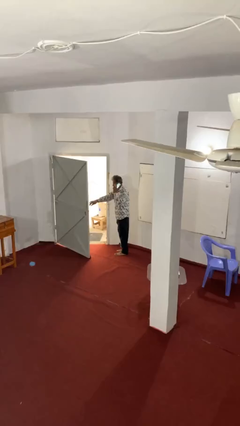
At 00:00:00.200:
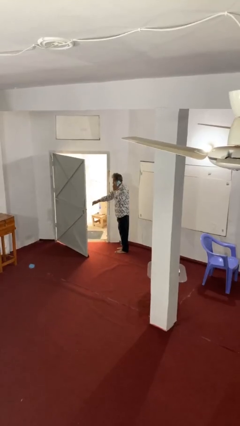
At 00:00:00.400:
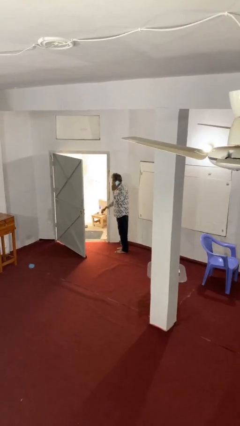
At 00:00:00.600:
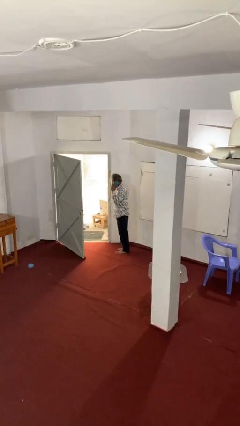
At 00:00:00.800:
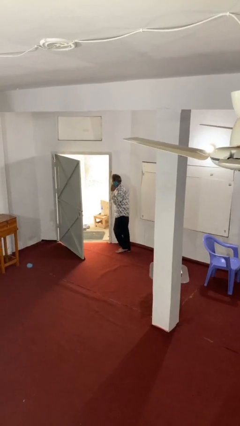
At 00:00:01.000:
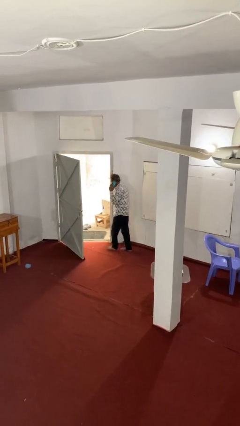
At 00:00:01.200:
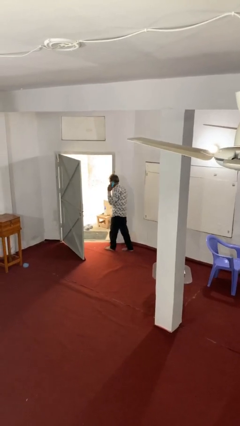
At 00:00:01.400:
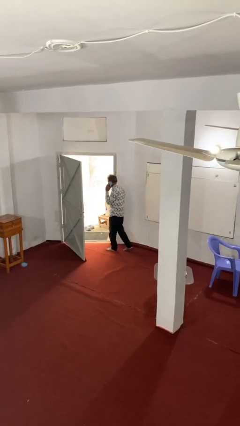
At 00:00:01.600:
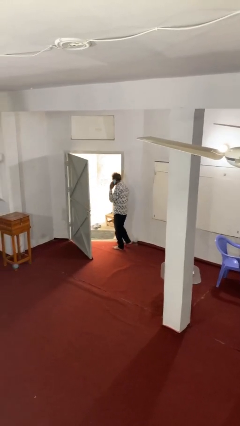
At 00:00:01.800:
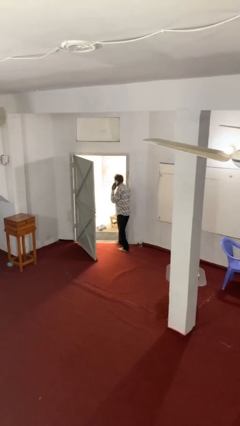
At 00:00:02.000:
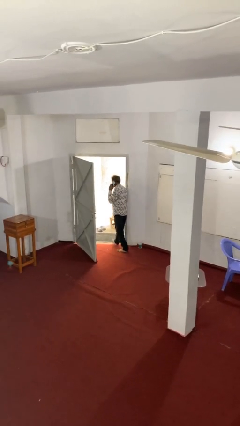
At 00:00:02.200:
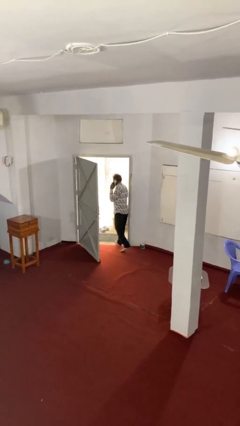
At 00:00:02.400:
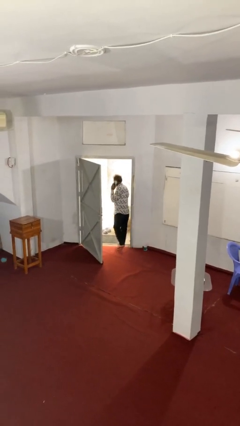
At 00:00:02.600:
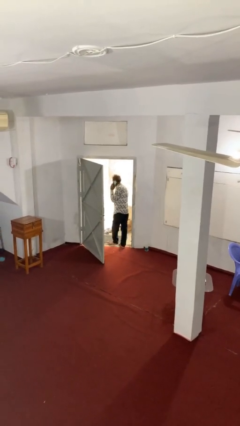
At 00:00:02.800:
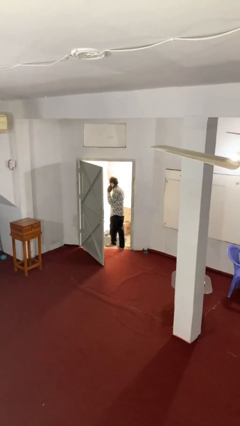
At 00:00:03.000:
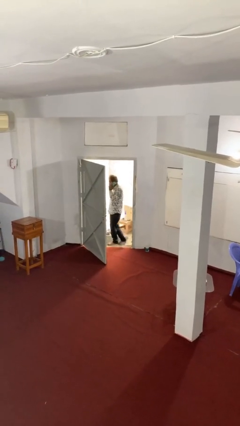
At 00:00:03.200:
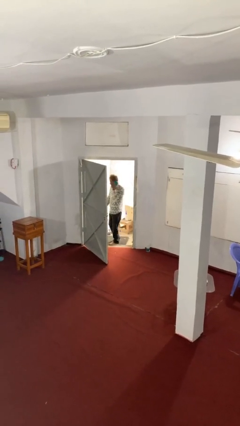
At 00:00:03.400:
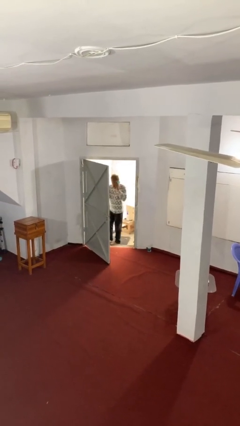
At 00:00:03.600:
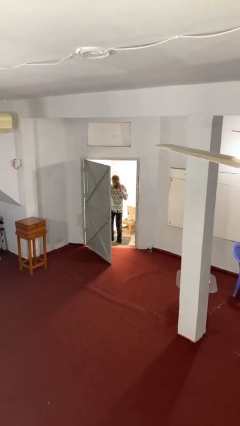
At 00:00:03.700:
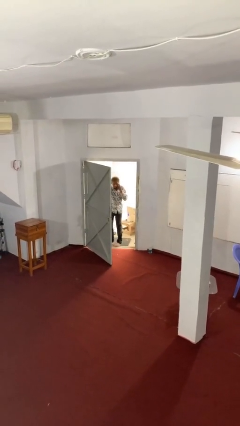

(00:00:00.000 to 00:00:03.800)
person exits scene through structure

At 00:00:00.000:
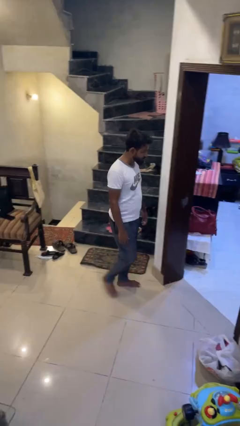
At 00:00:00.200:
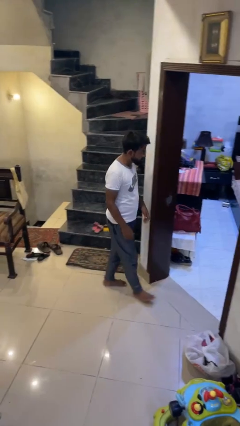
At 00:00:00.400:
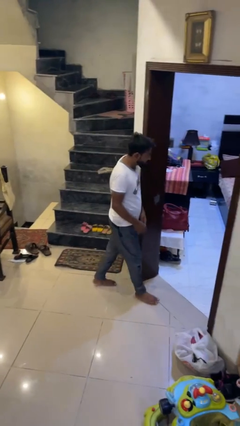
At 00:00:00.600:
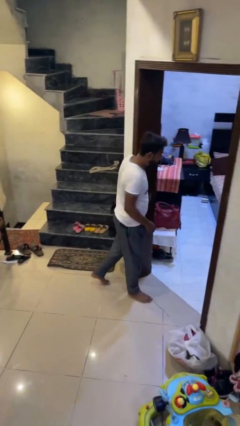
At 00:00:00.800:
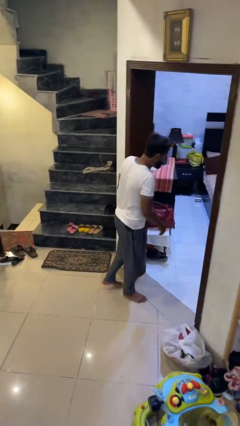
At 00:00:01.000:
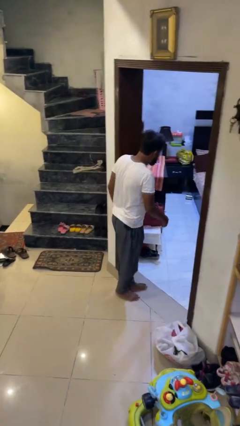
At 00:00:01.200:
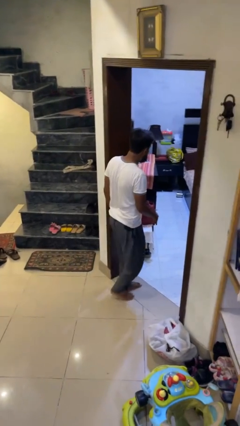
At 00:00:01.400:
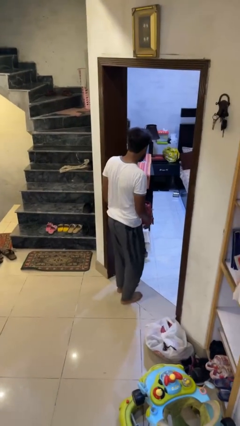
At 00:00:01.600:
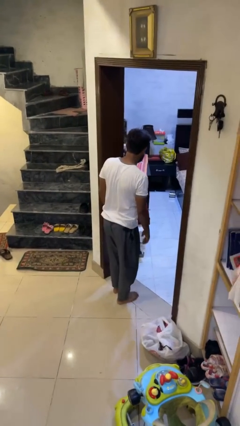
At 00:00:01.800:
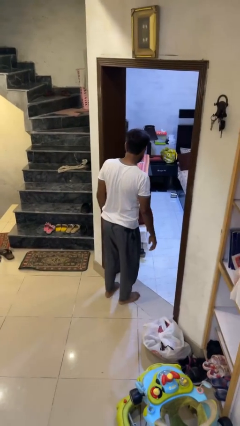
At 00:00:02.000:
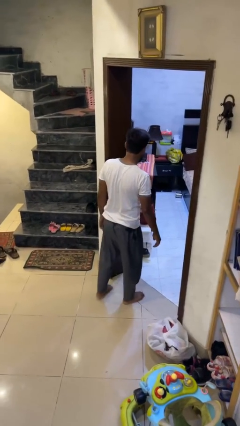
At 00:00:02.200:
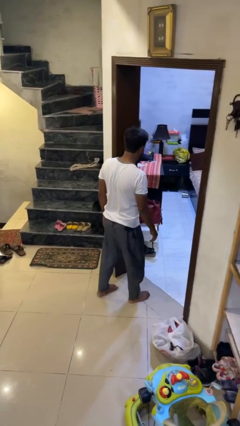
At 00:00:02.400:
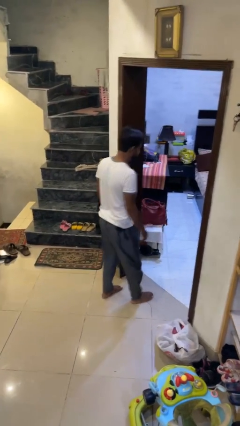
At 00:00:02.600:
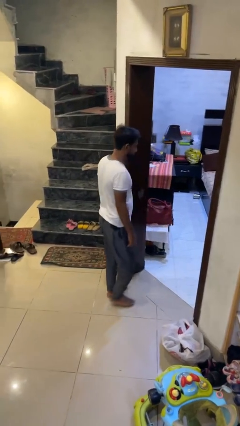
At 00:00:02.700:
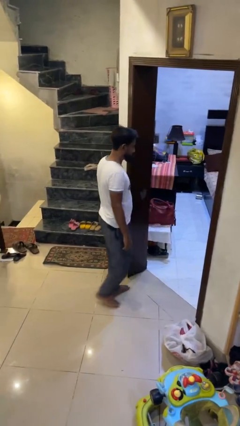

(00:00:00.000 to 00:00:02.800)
person bumps into wall

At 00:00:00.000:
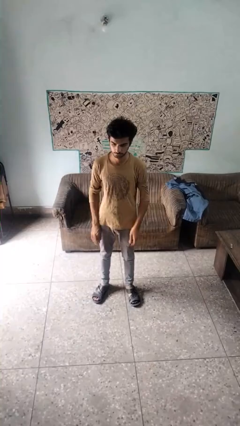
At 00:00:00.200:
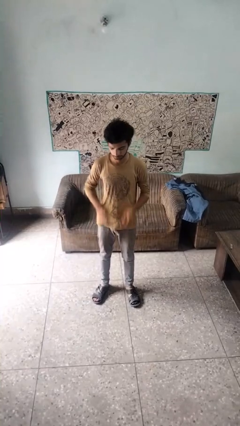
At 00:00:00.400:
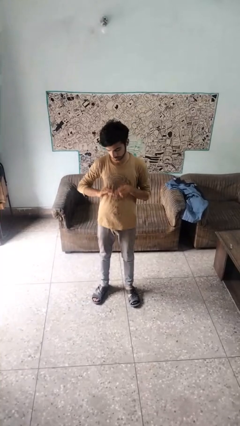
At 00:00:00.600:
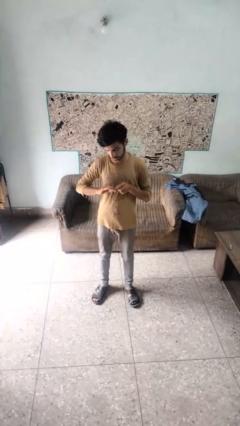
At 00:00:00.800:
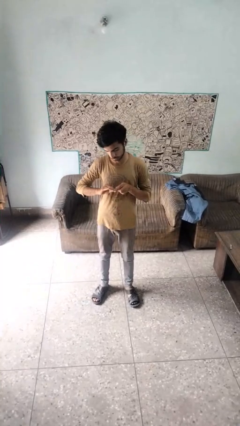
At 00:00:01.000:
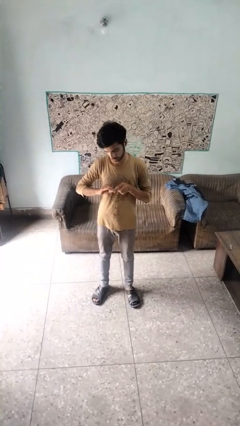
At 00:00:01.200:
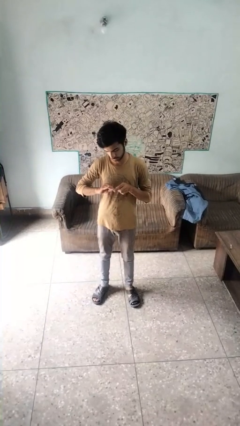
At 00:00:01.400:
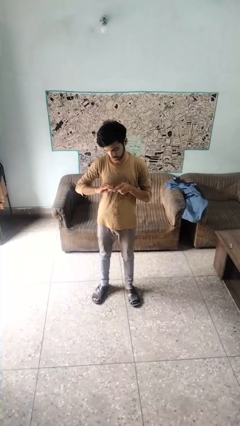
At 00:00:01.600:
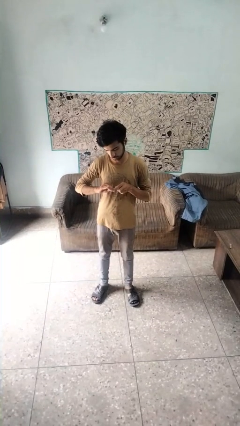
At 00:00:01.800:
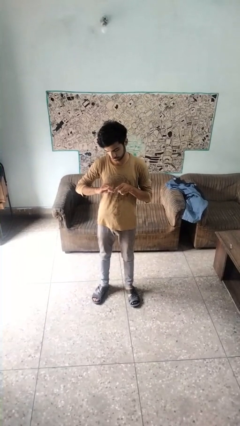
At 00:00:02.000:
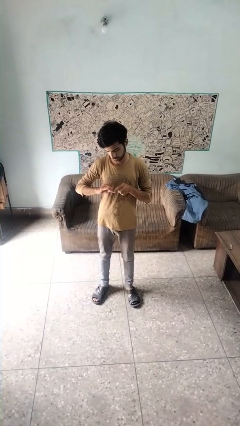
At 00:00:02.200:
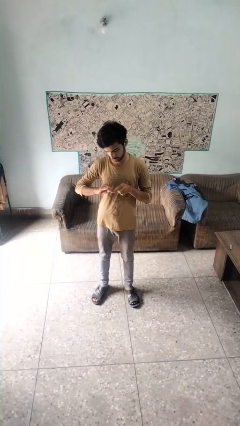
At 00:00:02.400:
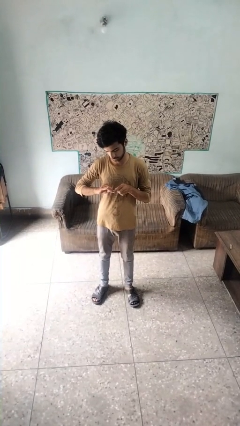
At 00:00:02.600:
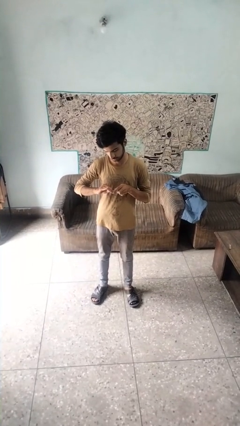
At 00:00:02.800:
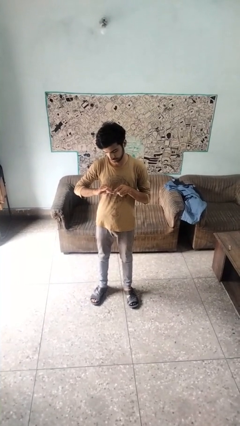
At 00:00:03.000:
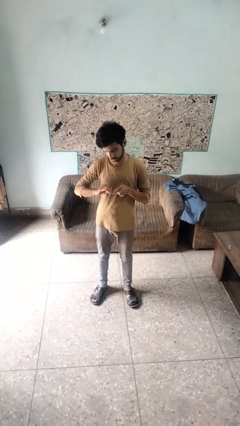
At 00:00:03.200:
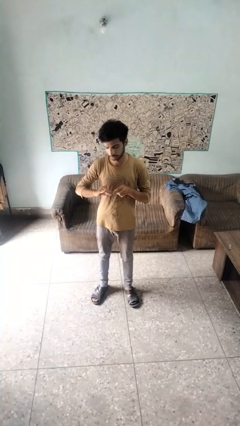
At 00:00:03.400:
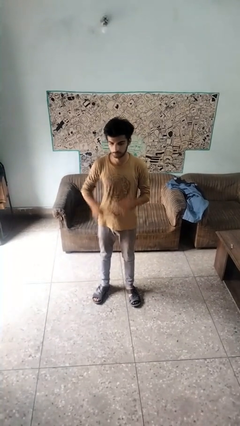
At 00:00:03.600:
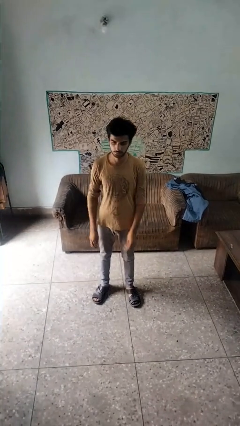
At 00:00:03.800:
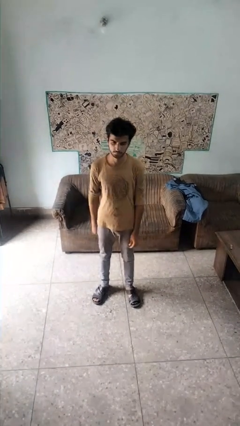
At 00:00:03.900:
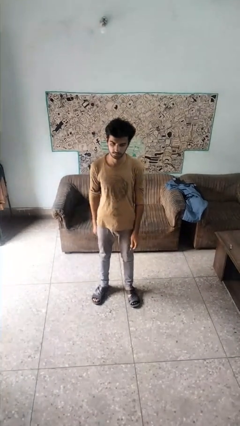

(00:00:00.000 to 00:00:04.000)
person files fingernails

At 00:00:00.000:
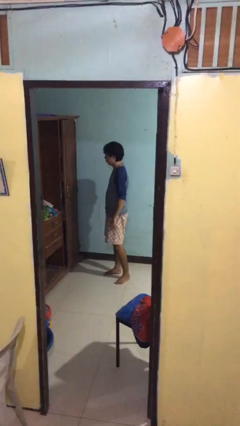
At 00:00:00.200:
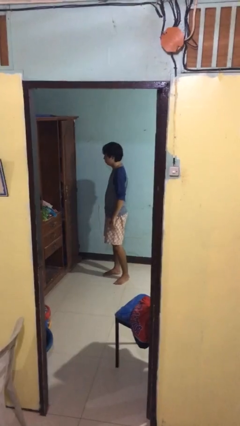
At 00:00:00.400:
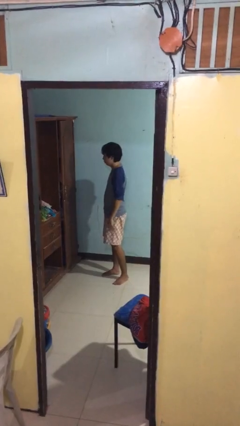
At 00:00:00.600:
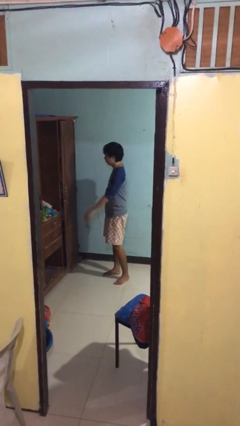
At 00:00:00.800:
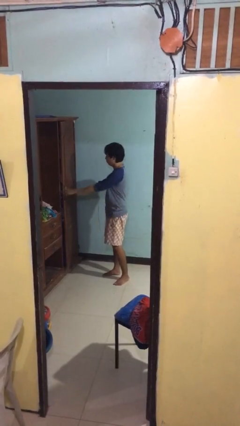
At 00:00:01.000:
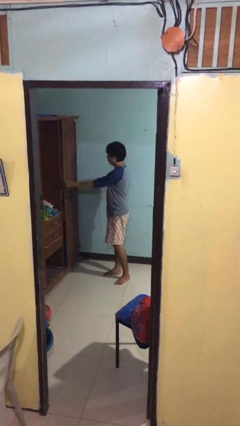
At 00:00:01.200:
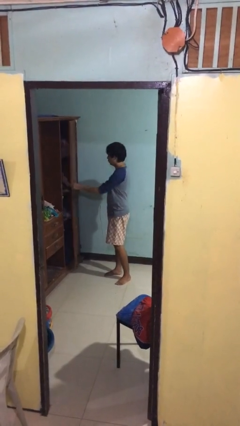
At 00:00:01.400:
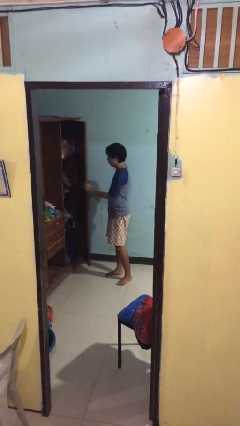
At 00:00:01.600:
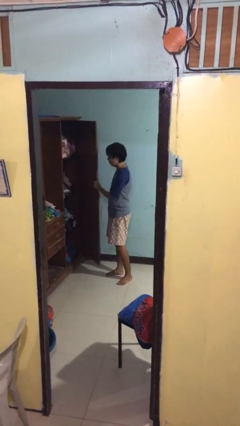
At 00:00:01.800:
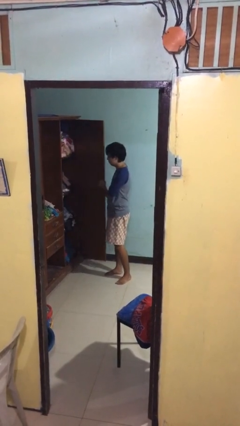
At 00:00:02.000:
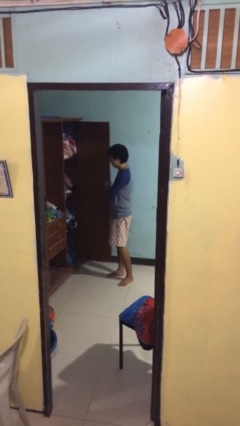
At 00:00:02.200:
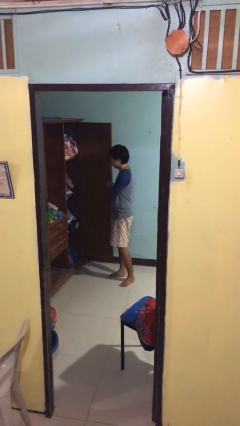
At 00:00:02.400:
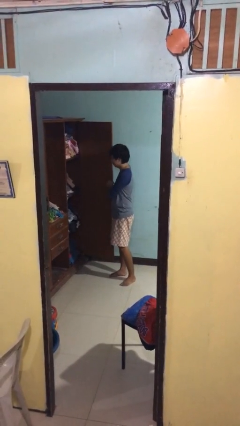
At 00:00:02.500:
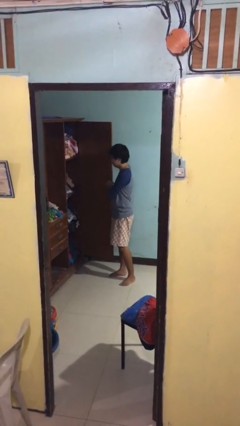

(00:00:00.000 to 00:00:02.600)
person opens closet door

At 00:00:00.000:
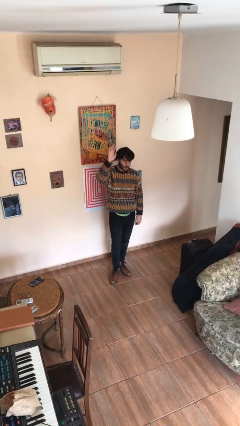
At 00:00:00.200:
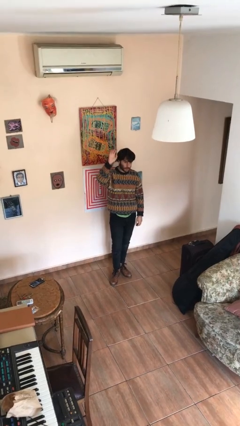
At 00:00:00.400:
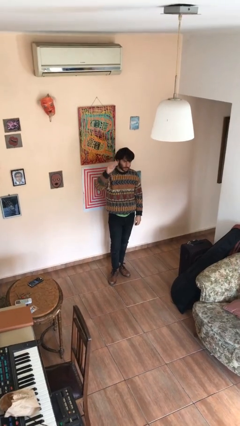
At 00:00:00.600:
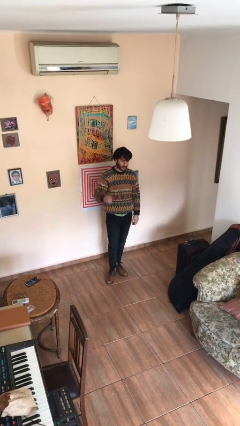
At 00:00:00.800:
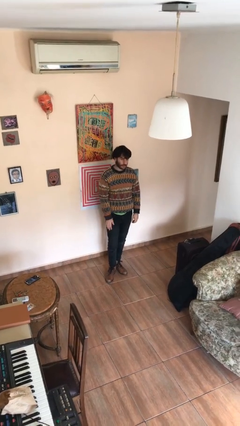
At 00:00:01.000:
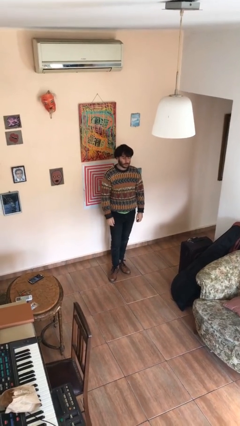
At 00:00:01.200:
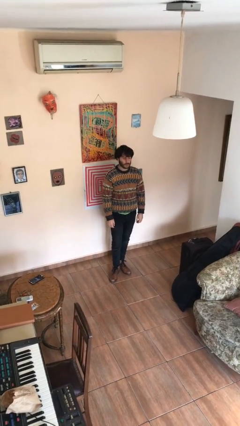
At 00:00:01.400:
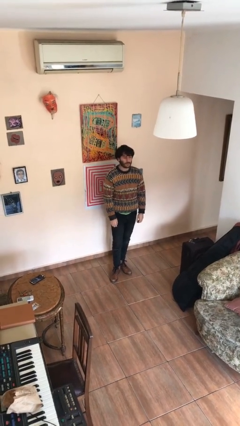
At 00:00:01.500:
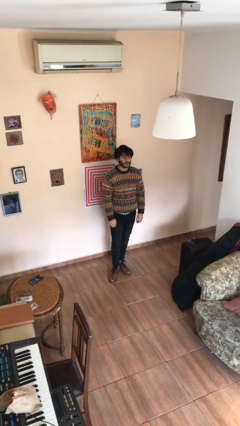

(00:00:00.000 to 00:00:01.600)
person gestures lower hand

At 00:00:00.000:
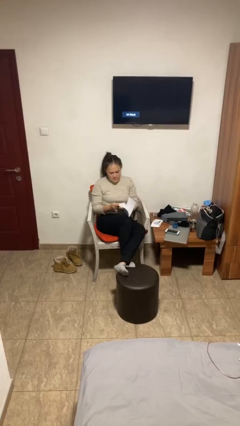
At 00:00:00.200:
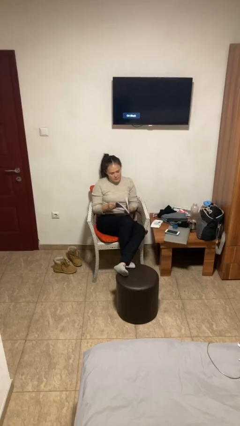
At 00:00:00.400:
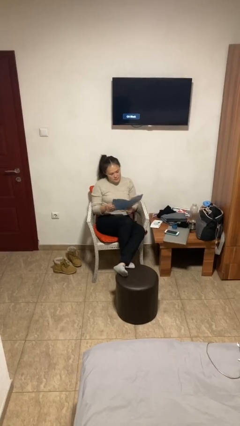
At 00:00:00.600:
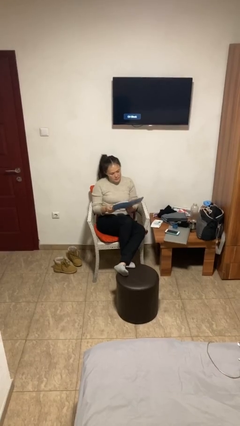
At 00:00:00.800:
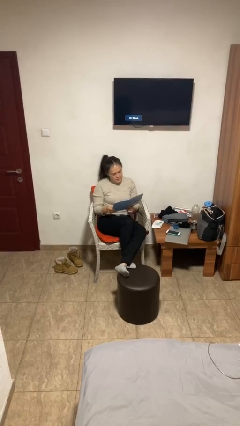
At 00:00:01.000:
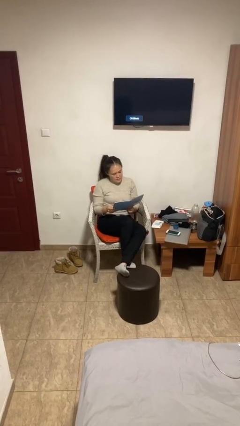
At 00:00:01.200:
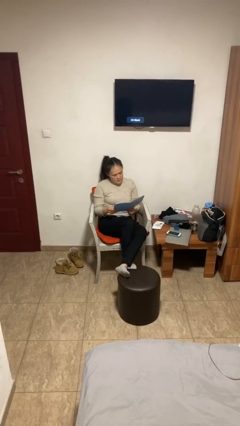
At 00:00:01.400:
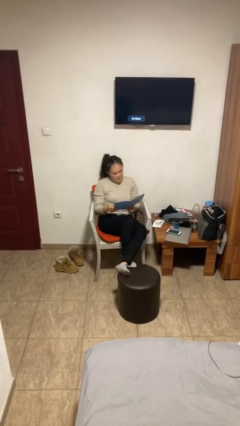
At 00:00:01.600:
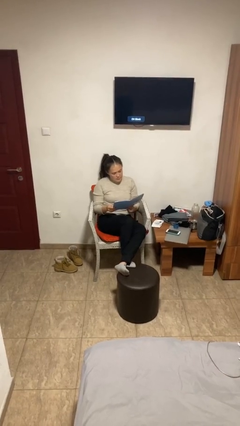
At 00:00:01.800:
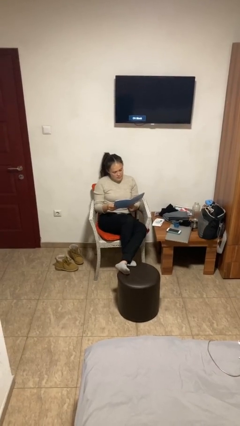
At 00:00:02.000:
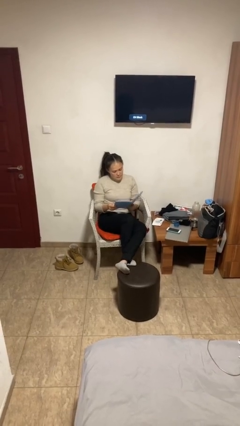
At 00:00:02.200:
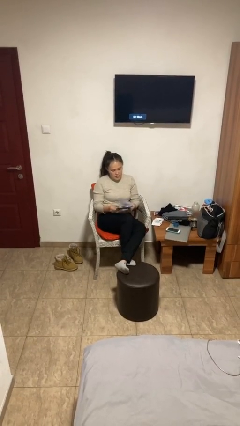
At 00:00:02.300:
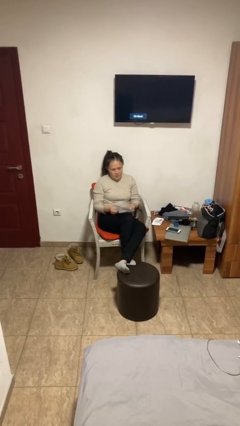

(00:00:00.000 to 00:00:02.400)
person reads document
